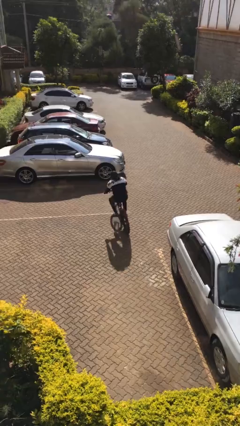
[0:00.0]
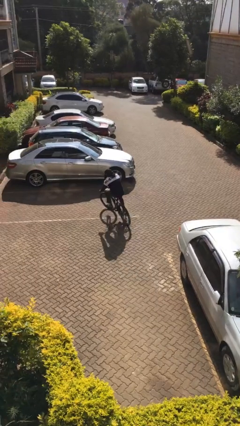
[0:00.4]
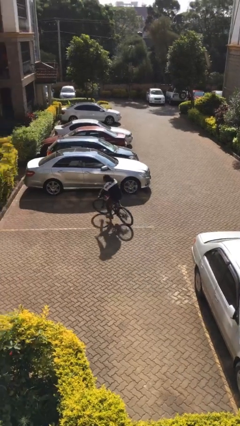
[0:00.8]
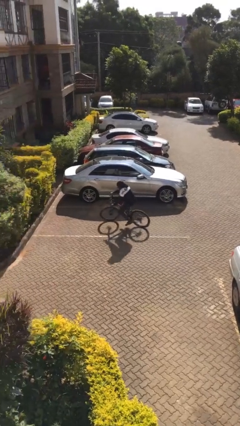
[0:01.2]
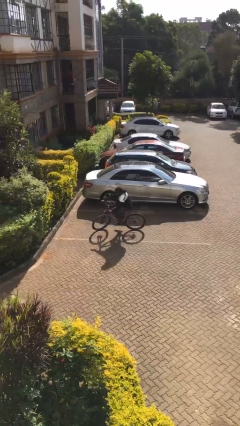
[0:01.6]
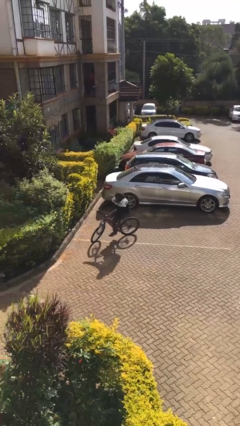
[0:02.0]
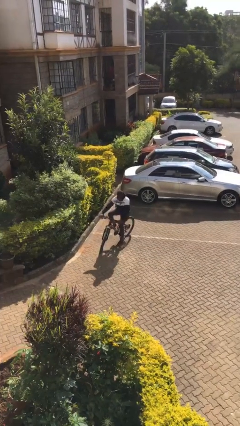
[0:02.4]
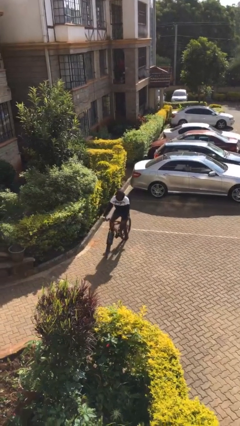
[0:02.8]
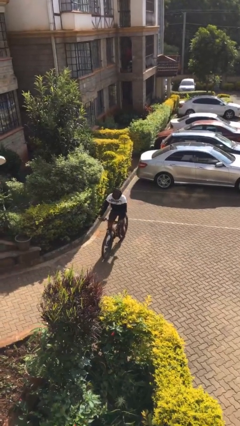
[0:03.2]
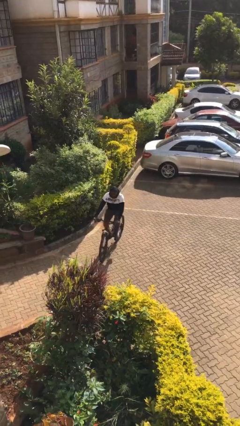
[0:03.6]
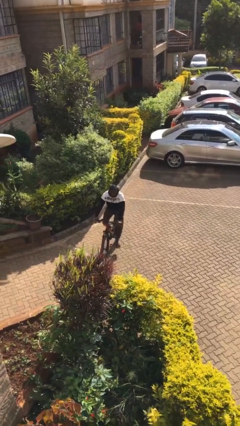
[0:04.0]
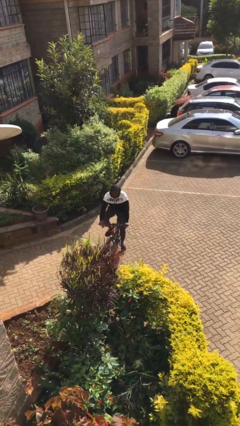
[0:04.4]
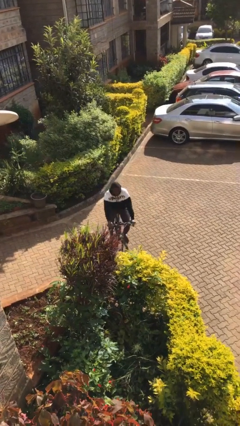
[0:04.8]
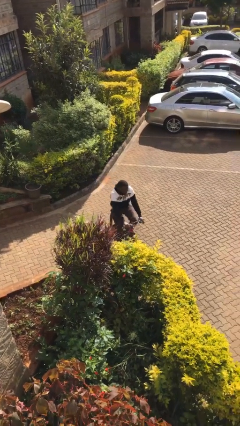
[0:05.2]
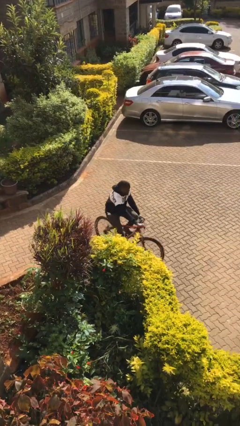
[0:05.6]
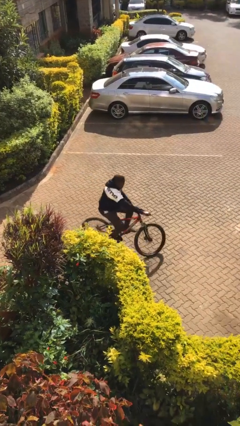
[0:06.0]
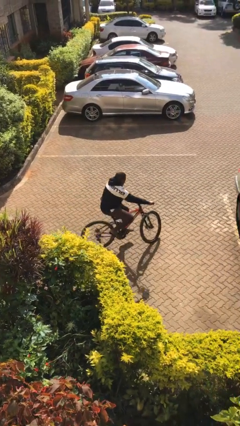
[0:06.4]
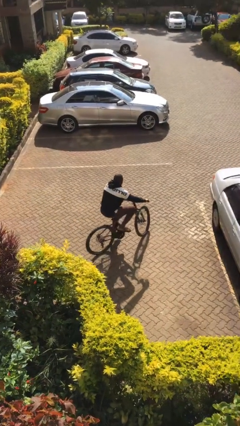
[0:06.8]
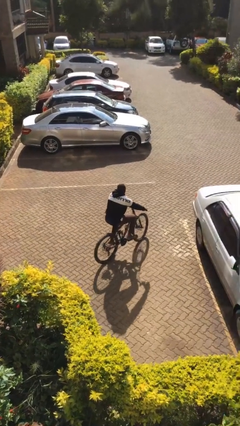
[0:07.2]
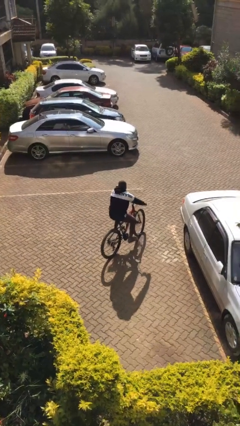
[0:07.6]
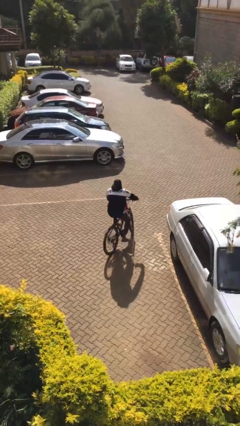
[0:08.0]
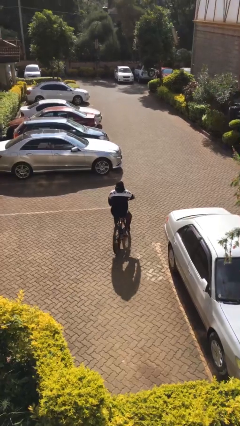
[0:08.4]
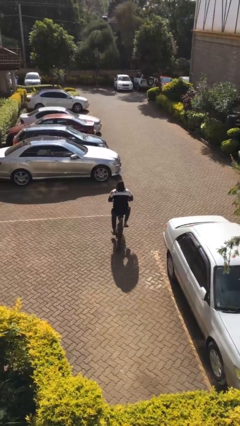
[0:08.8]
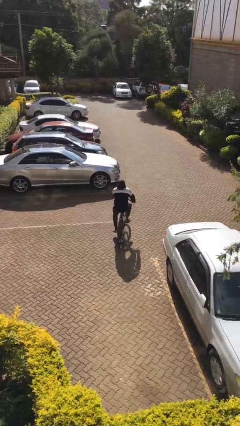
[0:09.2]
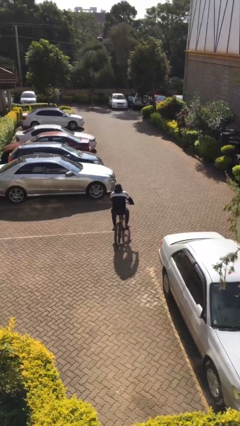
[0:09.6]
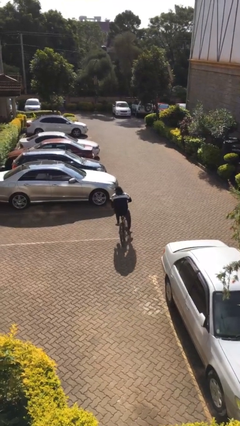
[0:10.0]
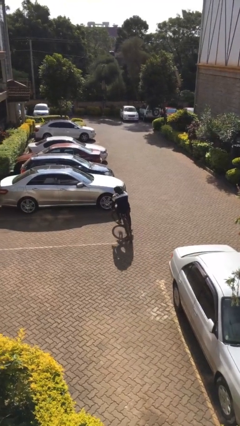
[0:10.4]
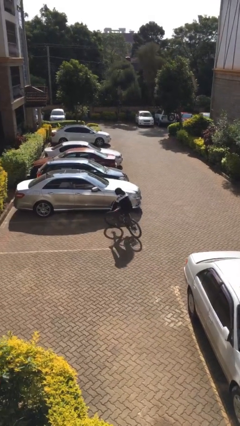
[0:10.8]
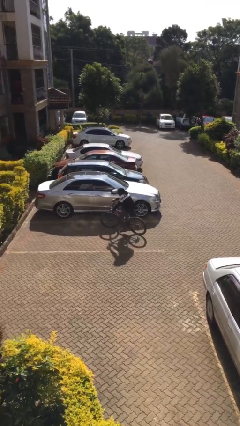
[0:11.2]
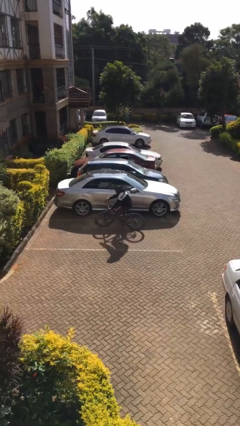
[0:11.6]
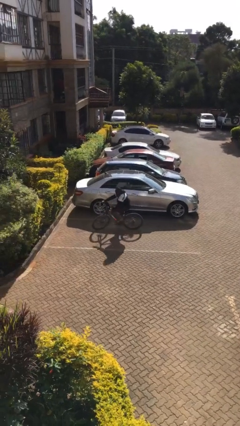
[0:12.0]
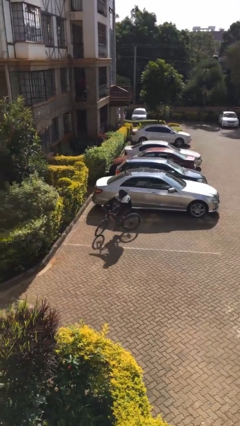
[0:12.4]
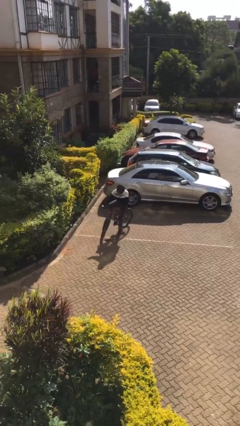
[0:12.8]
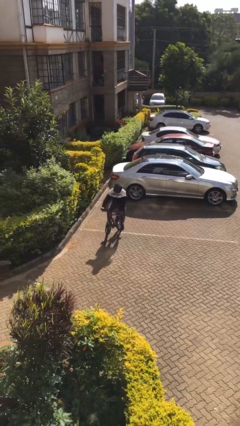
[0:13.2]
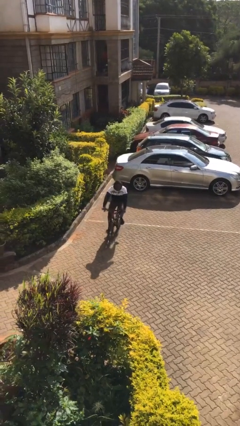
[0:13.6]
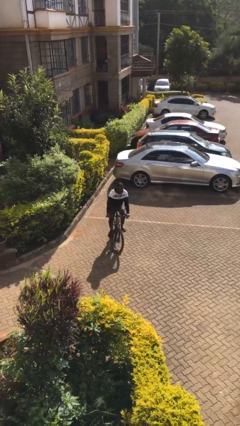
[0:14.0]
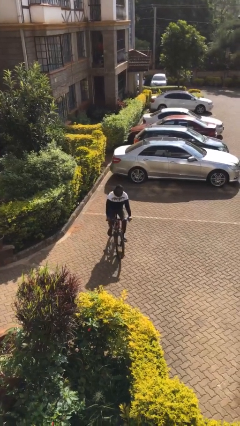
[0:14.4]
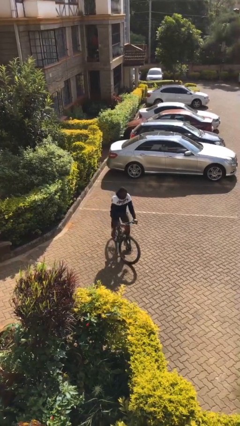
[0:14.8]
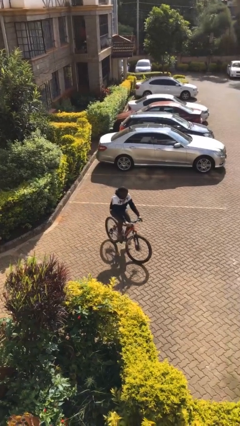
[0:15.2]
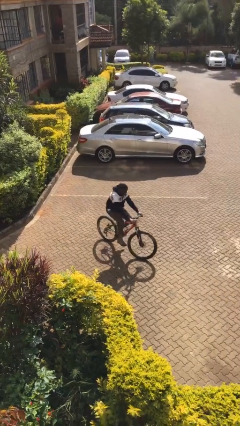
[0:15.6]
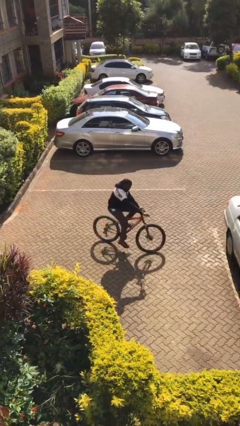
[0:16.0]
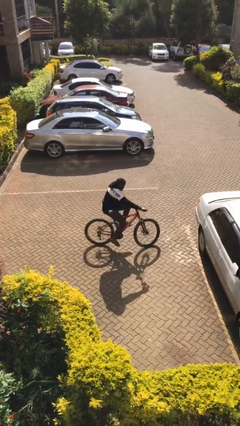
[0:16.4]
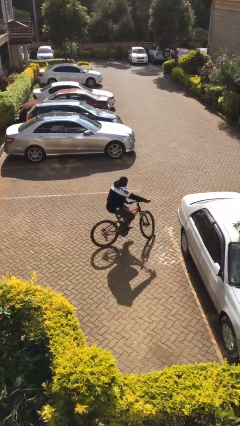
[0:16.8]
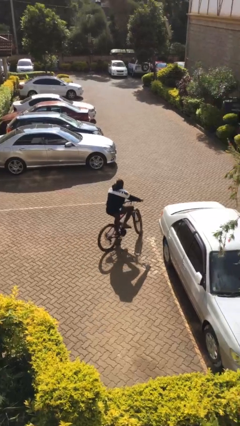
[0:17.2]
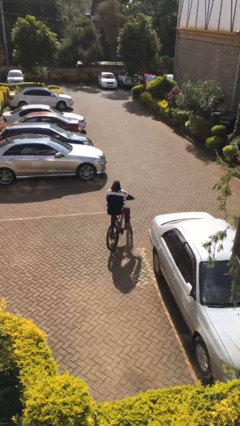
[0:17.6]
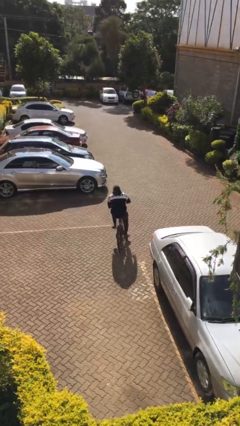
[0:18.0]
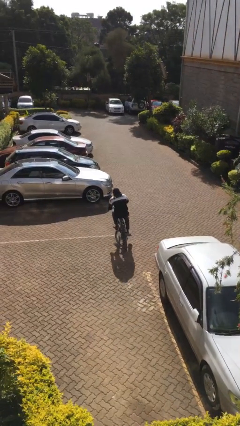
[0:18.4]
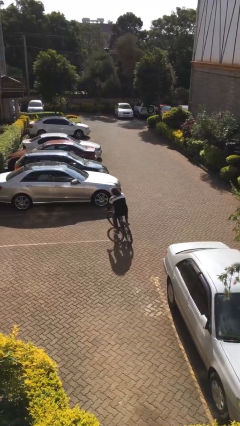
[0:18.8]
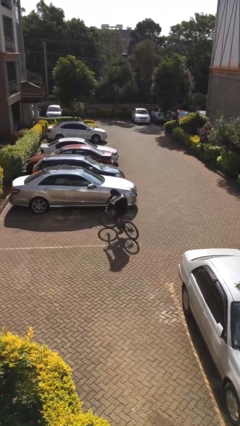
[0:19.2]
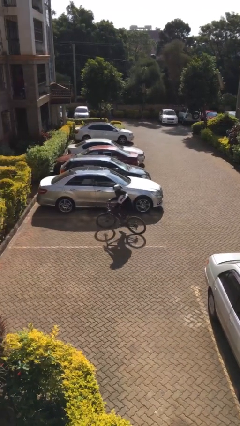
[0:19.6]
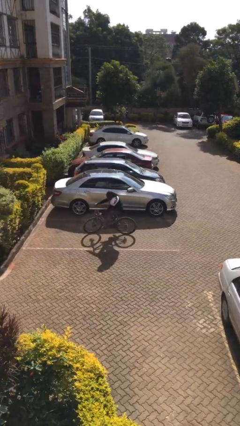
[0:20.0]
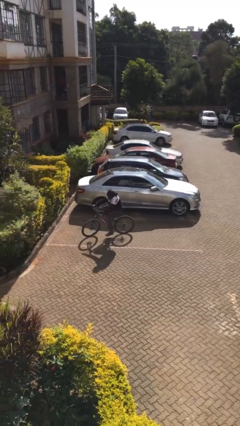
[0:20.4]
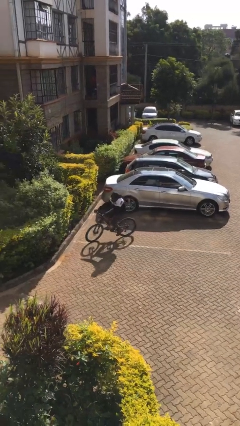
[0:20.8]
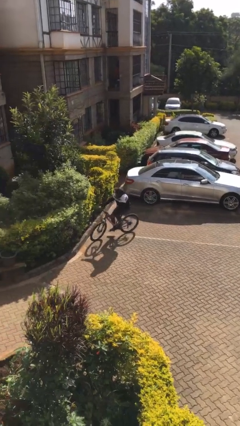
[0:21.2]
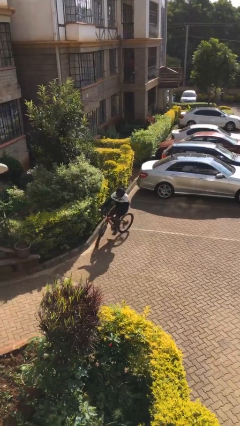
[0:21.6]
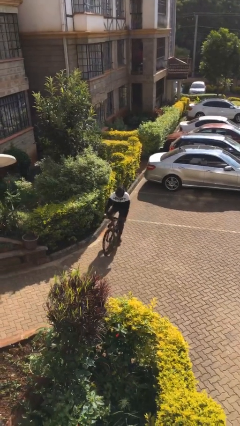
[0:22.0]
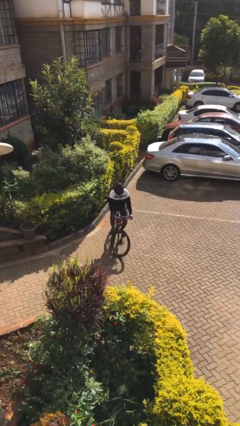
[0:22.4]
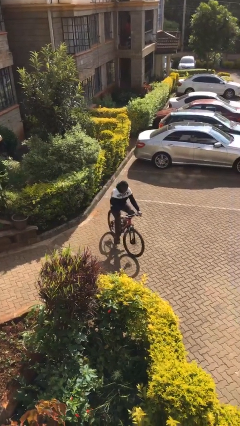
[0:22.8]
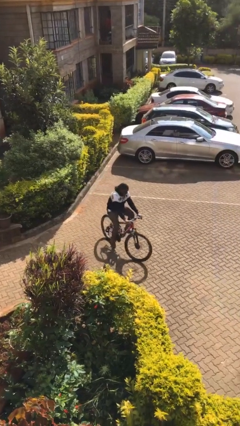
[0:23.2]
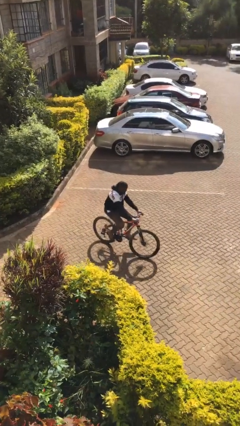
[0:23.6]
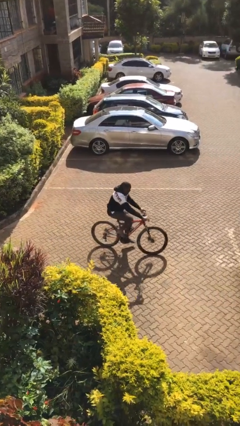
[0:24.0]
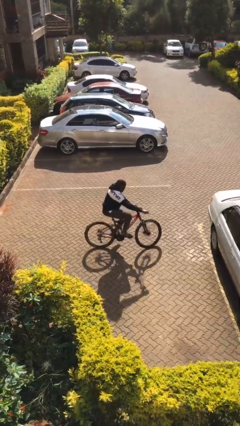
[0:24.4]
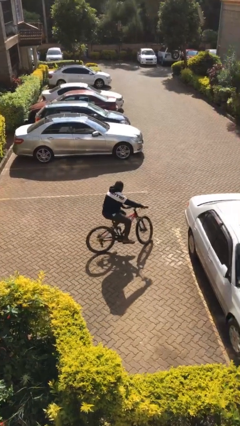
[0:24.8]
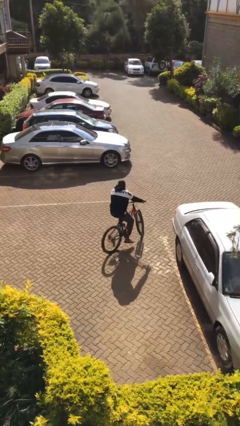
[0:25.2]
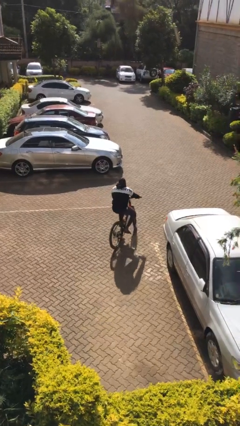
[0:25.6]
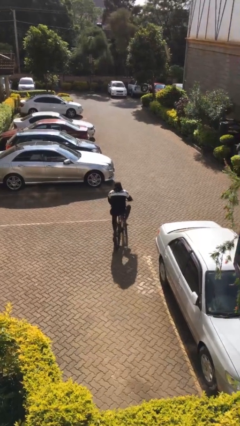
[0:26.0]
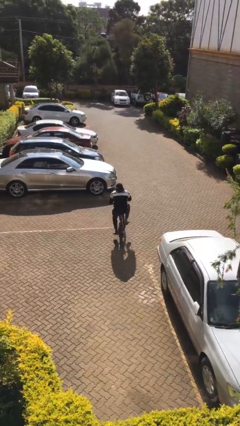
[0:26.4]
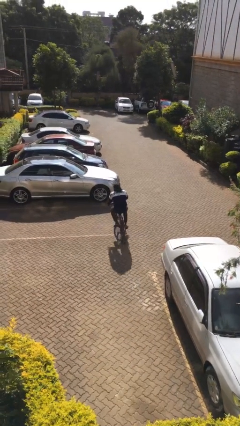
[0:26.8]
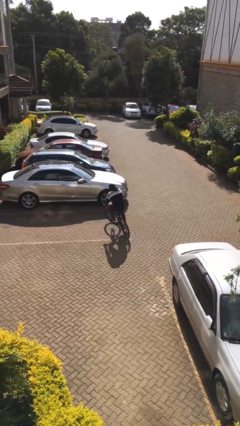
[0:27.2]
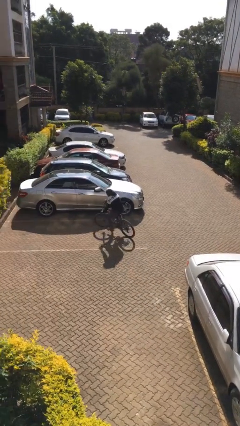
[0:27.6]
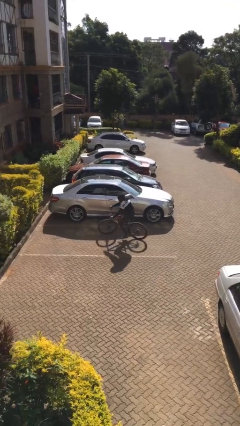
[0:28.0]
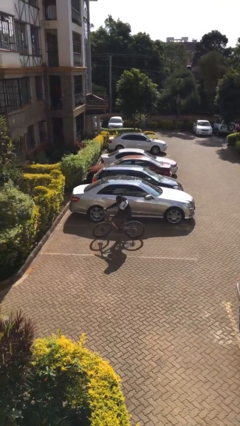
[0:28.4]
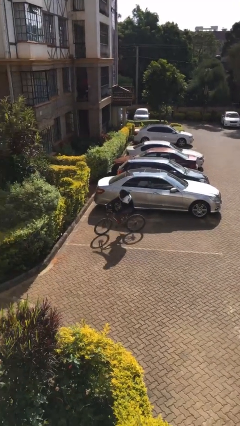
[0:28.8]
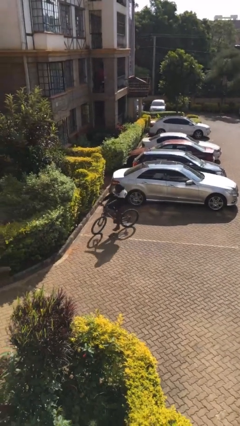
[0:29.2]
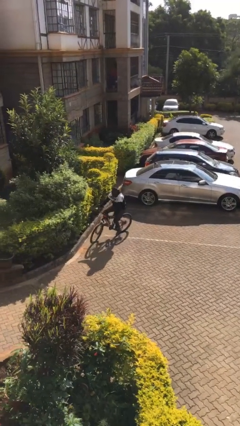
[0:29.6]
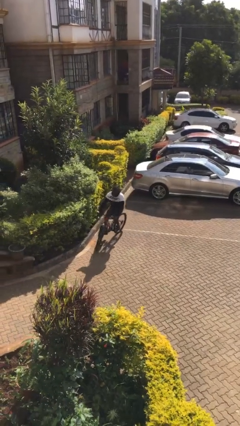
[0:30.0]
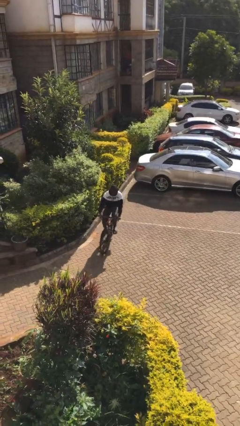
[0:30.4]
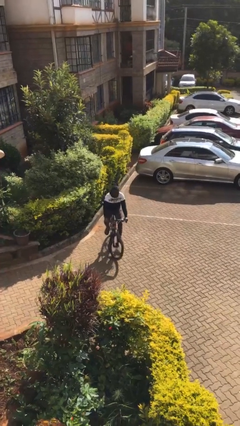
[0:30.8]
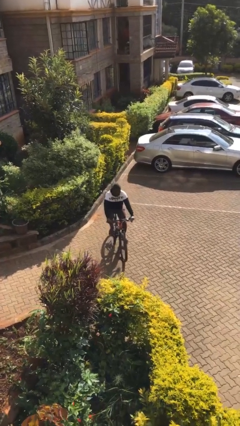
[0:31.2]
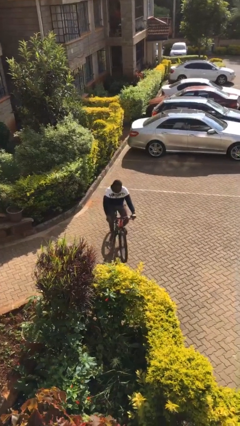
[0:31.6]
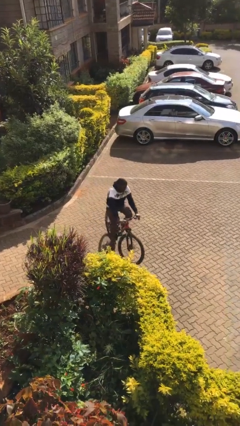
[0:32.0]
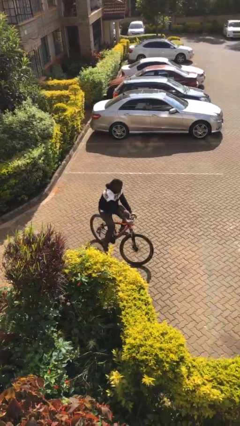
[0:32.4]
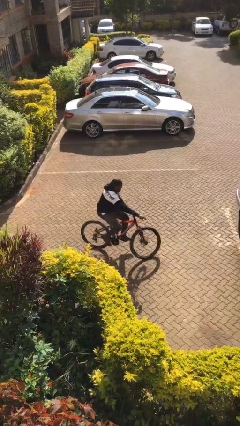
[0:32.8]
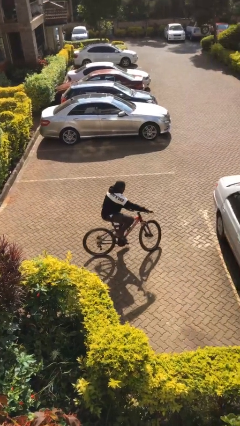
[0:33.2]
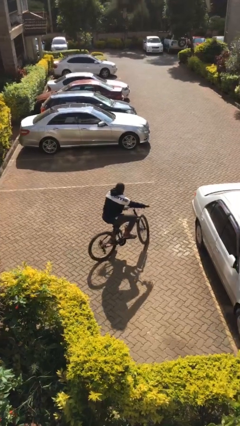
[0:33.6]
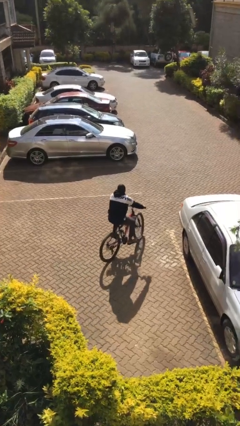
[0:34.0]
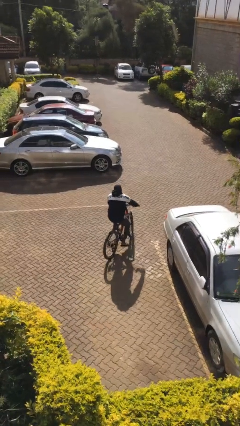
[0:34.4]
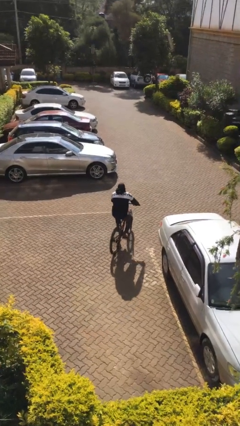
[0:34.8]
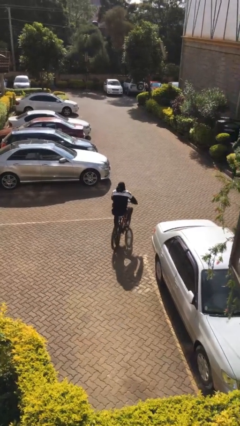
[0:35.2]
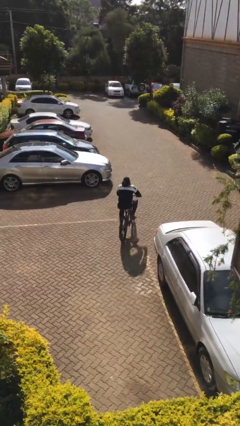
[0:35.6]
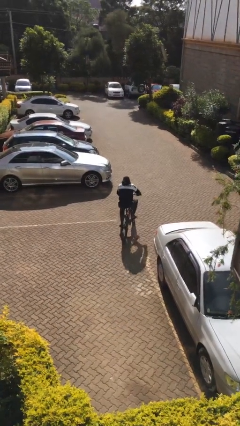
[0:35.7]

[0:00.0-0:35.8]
person rides bicycle

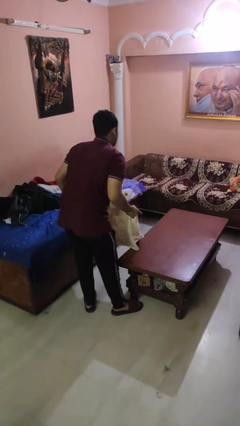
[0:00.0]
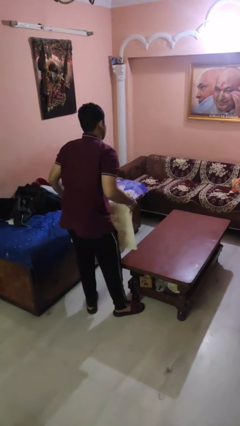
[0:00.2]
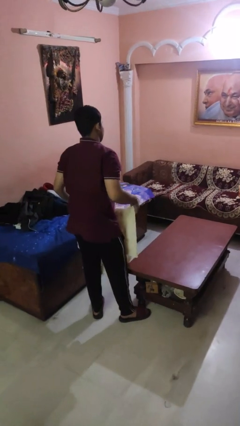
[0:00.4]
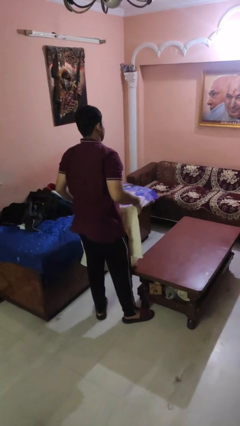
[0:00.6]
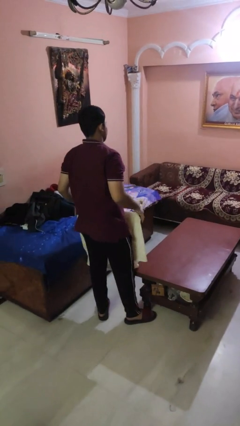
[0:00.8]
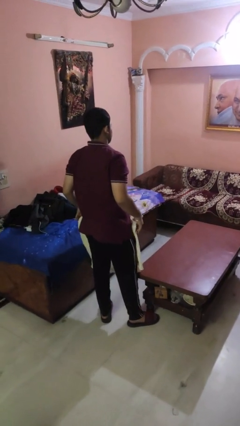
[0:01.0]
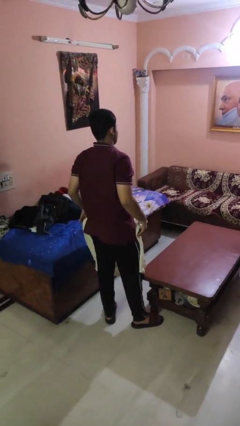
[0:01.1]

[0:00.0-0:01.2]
person folds tablecloth
